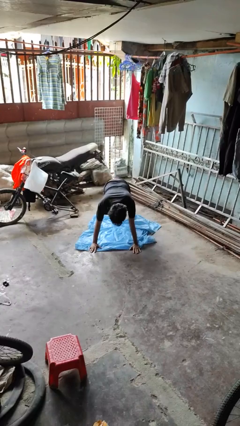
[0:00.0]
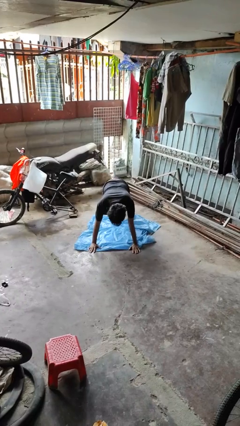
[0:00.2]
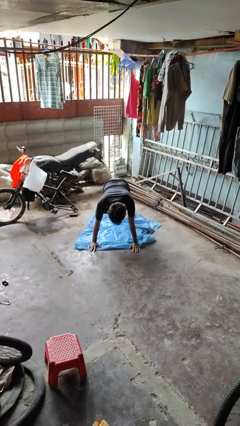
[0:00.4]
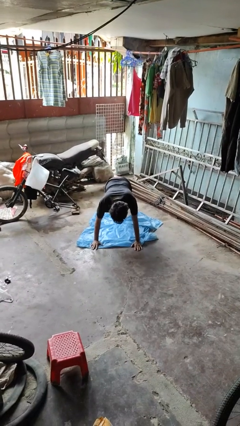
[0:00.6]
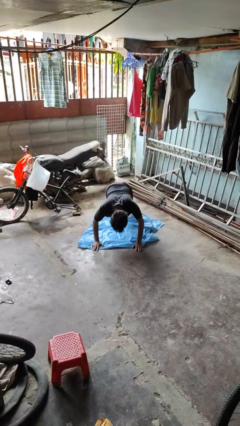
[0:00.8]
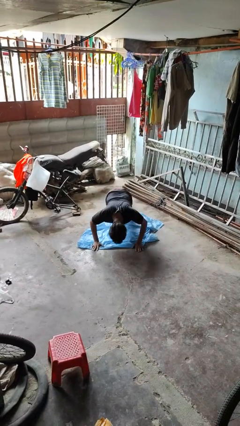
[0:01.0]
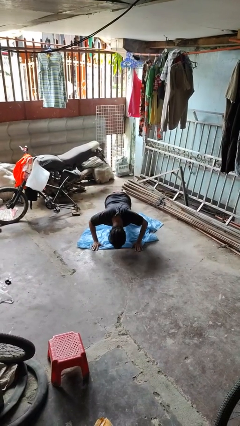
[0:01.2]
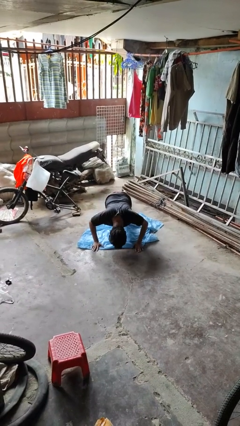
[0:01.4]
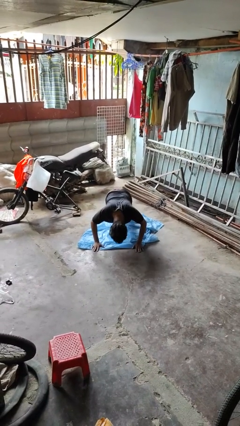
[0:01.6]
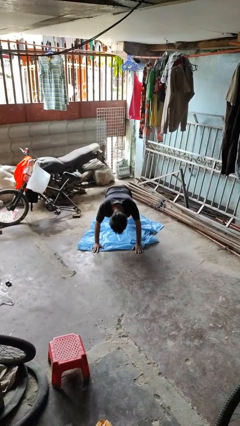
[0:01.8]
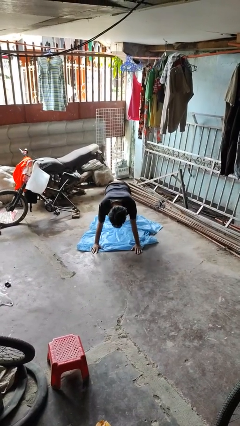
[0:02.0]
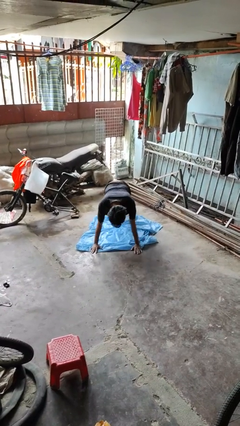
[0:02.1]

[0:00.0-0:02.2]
person exercises with pushup

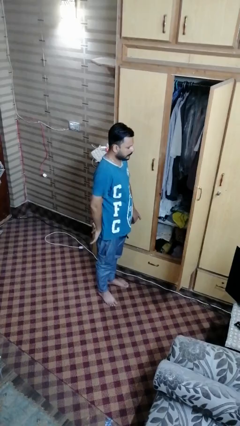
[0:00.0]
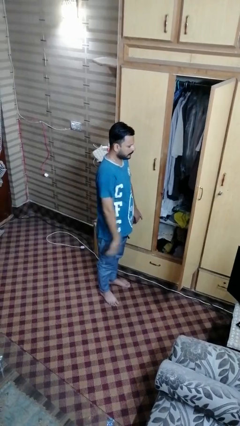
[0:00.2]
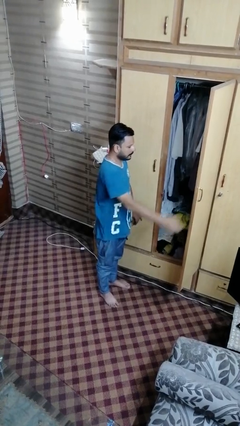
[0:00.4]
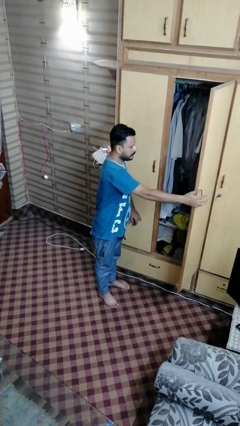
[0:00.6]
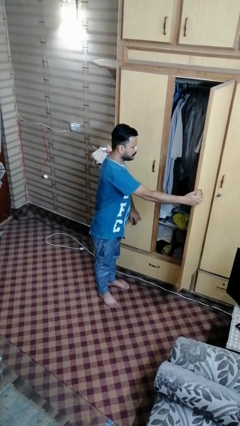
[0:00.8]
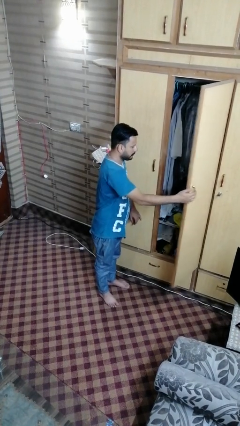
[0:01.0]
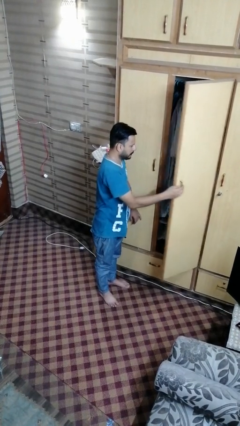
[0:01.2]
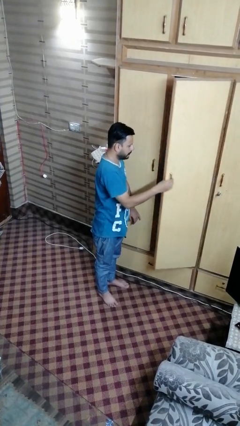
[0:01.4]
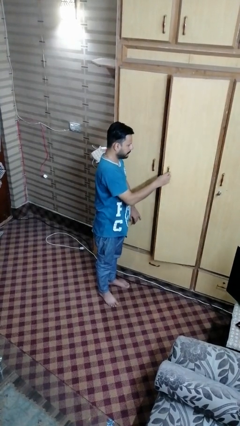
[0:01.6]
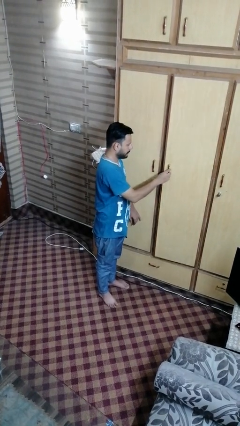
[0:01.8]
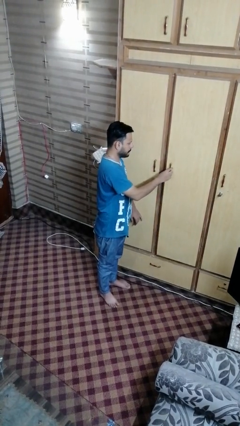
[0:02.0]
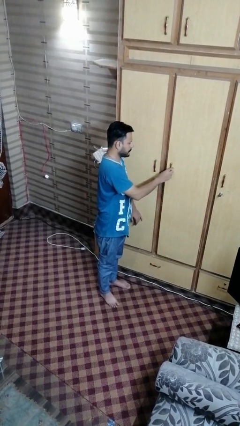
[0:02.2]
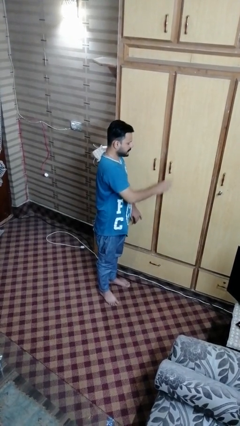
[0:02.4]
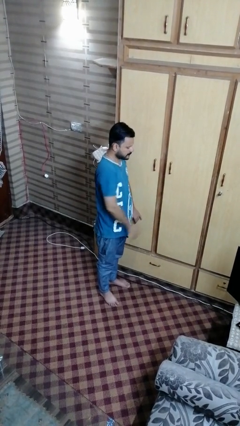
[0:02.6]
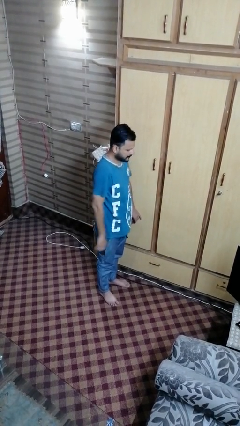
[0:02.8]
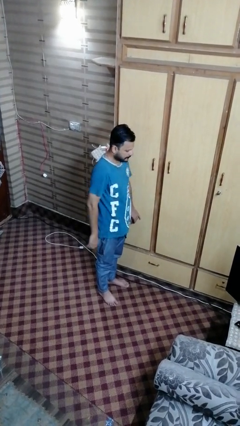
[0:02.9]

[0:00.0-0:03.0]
person closes closet door

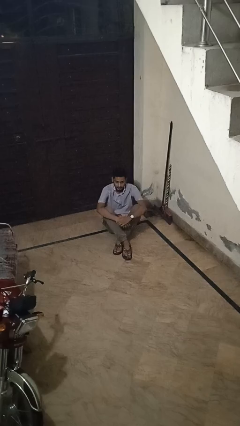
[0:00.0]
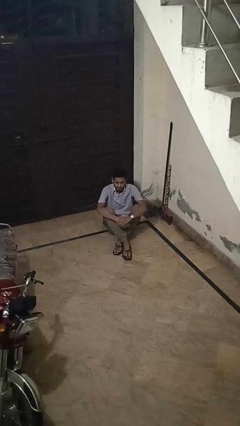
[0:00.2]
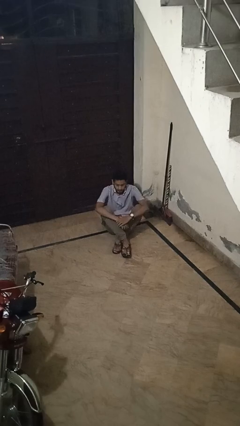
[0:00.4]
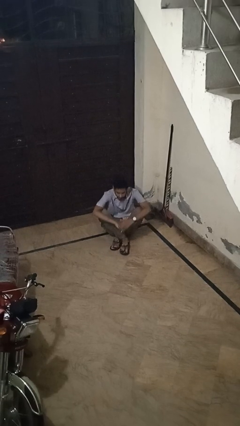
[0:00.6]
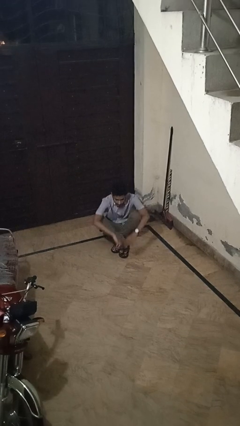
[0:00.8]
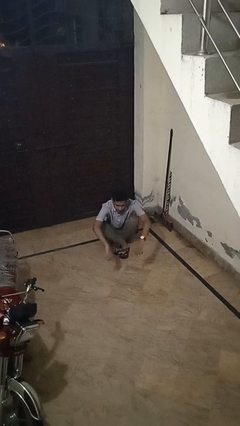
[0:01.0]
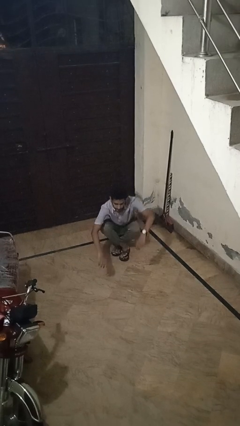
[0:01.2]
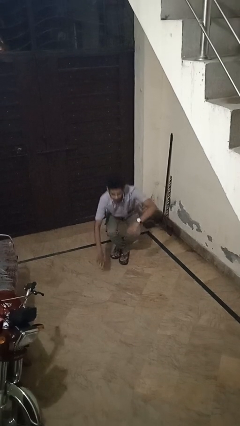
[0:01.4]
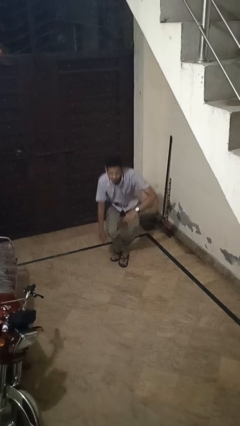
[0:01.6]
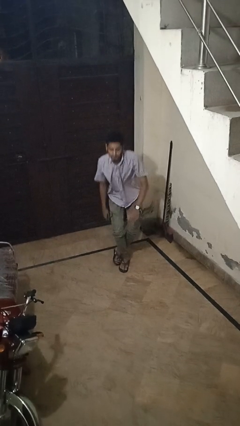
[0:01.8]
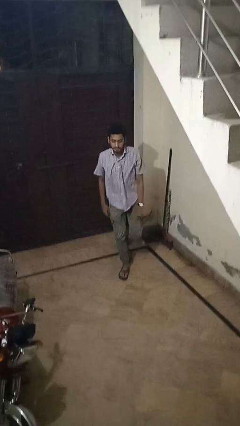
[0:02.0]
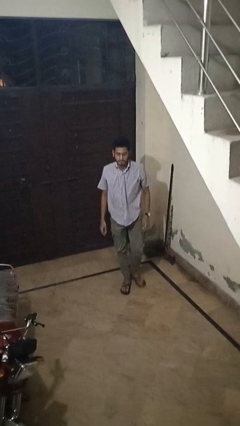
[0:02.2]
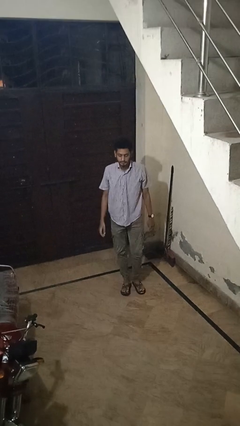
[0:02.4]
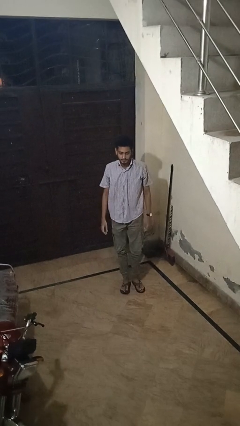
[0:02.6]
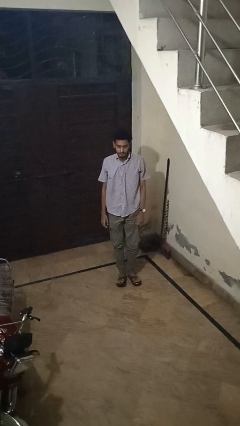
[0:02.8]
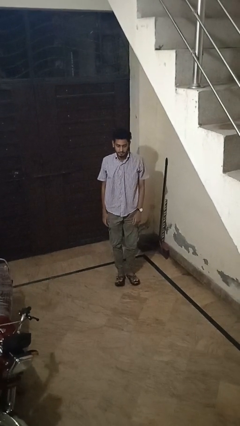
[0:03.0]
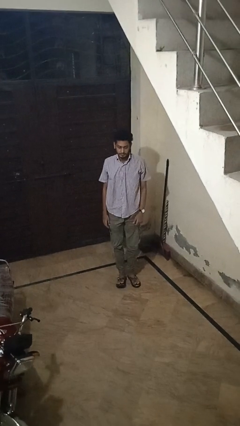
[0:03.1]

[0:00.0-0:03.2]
person stands up from floor

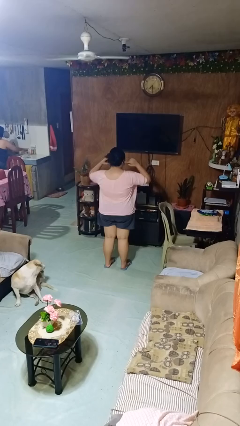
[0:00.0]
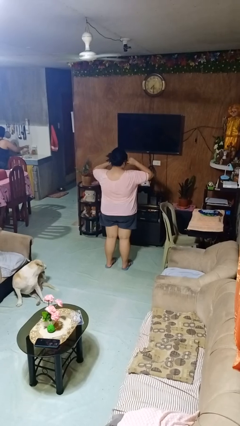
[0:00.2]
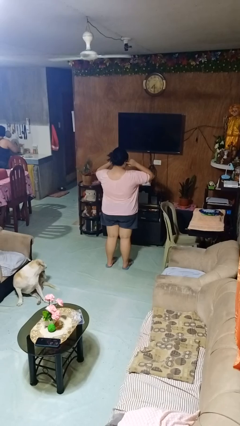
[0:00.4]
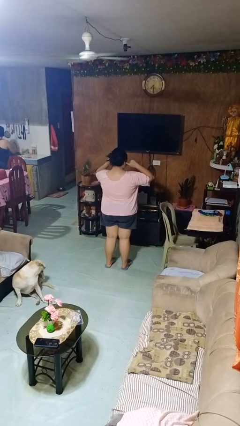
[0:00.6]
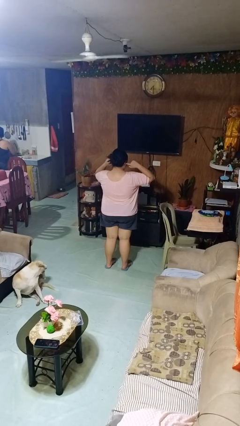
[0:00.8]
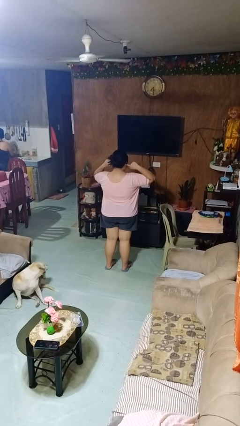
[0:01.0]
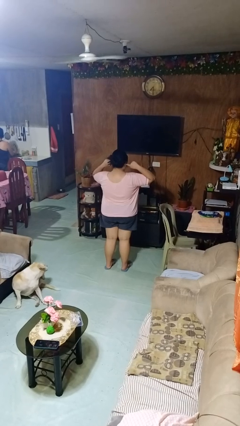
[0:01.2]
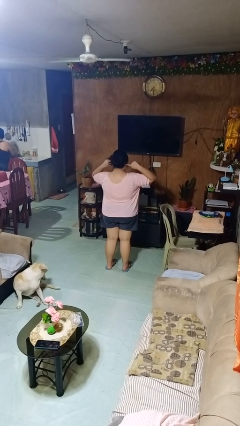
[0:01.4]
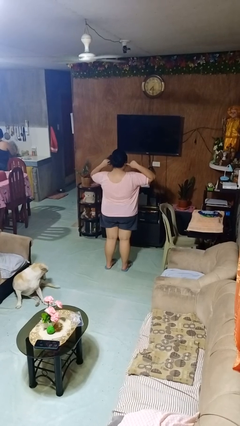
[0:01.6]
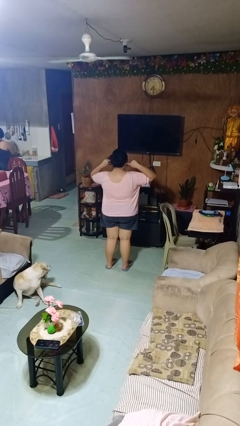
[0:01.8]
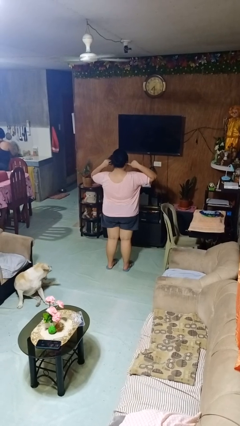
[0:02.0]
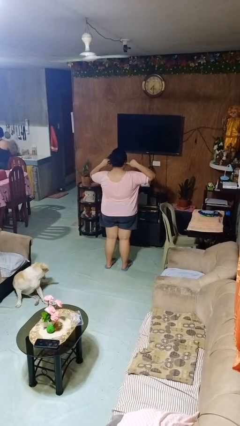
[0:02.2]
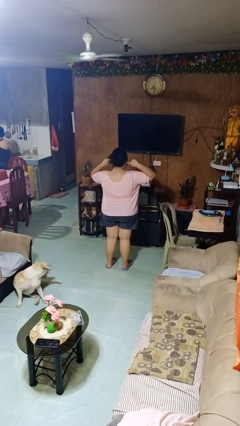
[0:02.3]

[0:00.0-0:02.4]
person puts fingers in ear

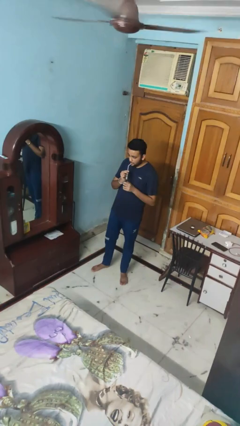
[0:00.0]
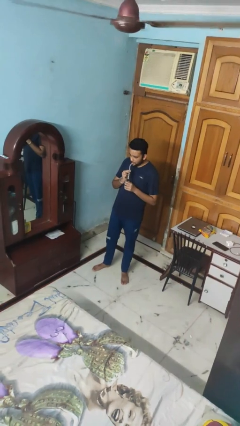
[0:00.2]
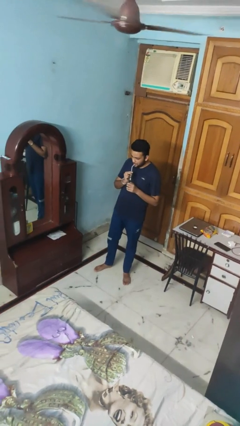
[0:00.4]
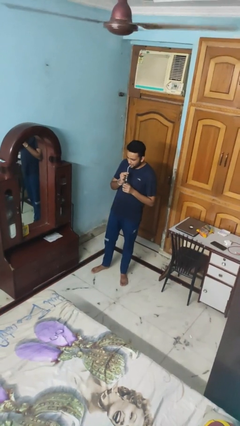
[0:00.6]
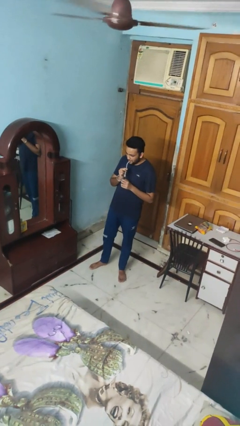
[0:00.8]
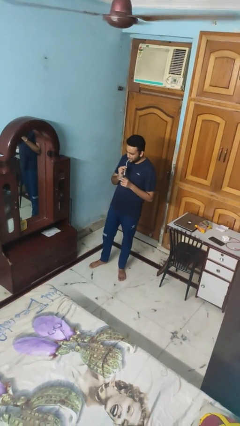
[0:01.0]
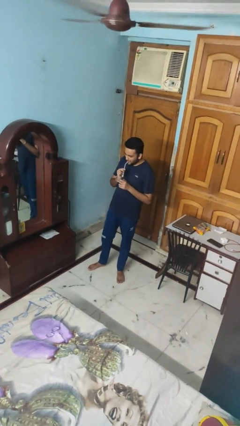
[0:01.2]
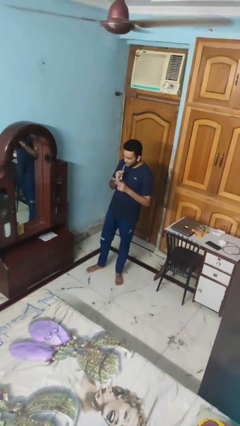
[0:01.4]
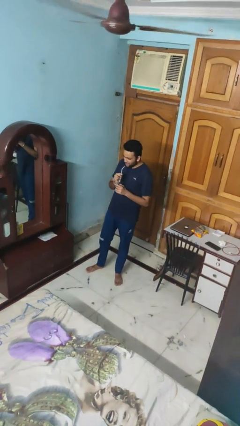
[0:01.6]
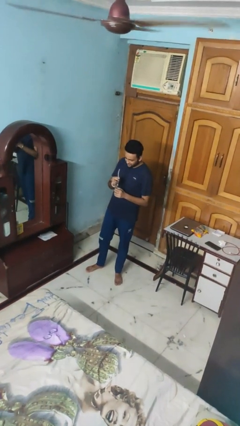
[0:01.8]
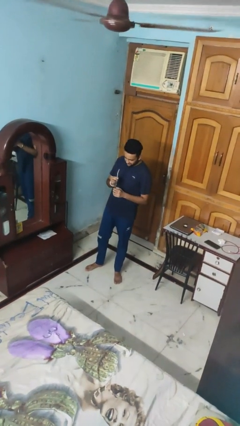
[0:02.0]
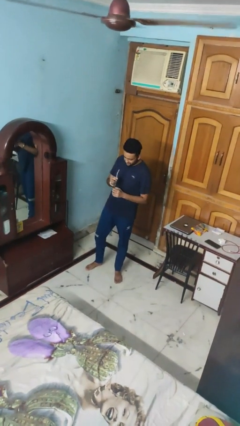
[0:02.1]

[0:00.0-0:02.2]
person drinks from straw

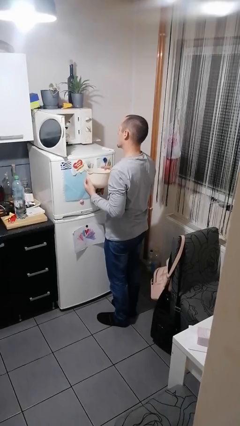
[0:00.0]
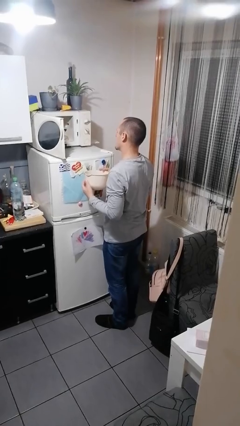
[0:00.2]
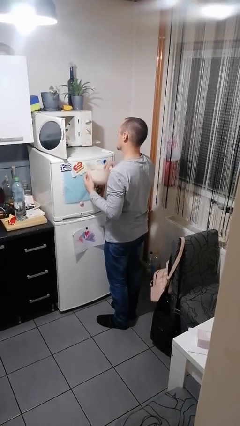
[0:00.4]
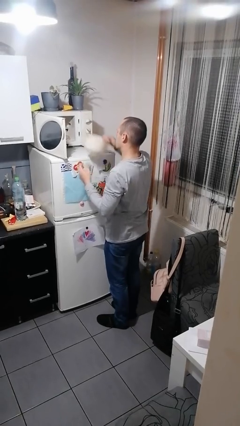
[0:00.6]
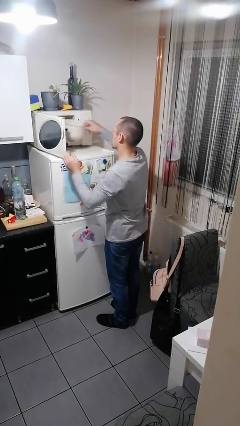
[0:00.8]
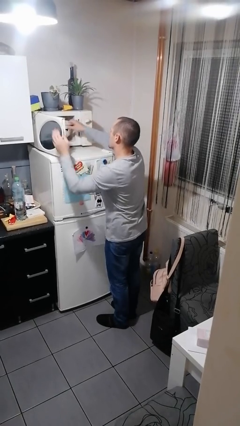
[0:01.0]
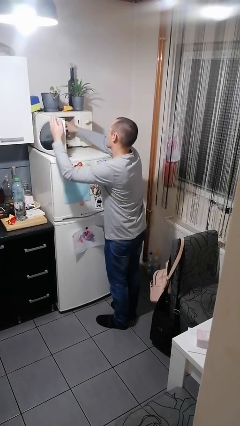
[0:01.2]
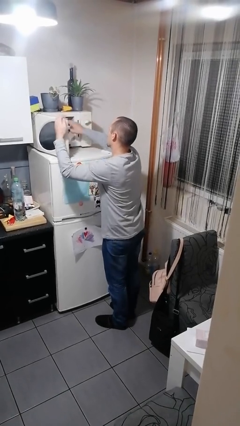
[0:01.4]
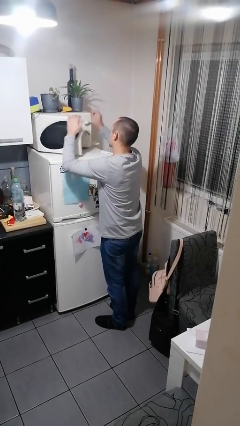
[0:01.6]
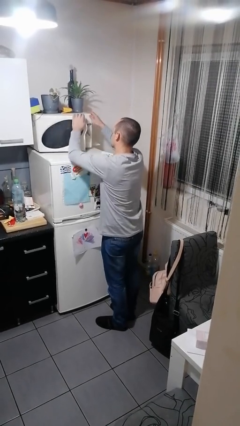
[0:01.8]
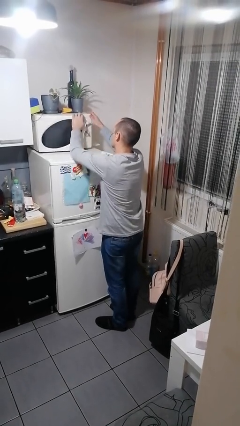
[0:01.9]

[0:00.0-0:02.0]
person puts object into microwave

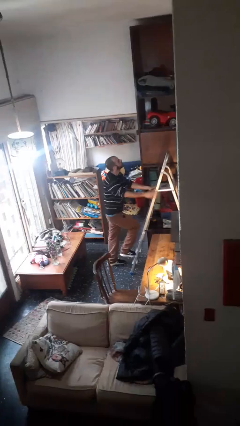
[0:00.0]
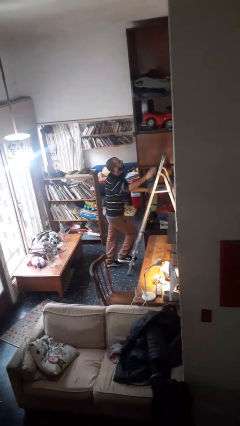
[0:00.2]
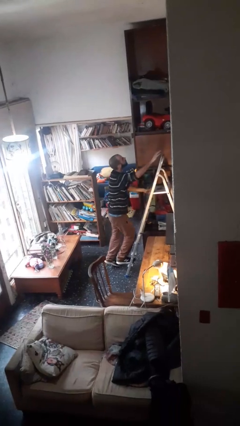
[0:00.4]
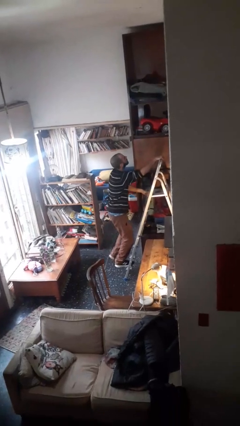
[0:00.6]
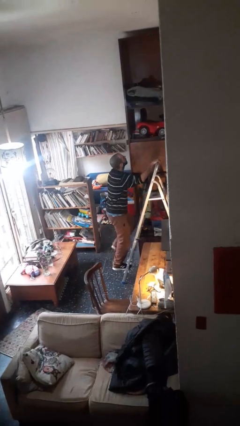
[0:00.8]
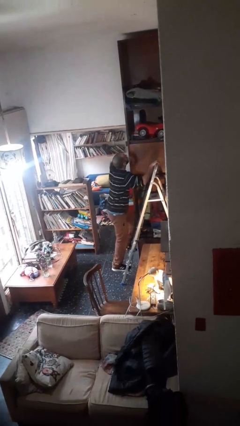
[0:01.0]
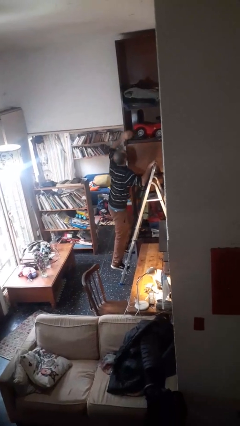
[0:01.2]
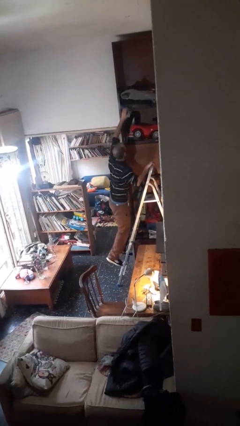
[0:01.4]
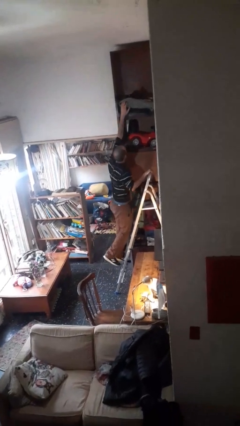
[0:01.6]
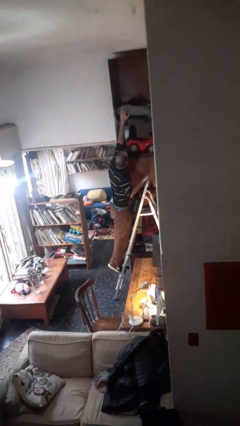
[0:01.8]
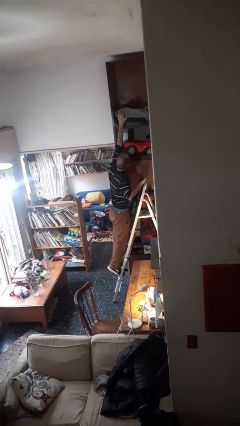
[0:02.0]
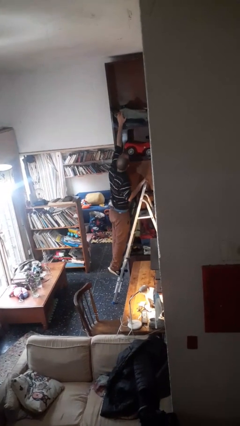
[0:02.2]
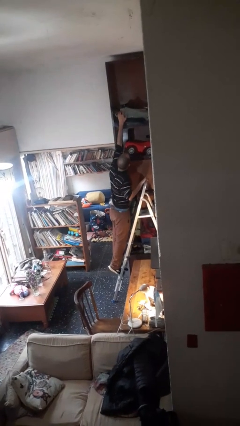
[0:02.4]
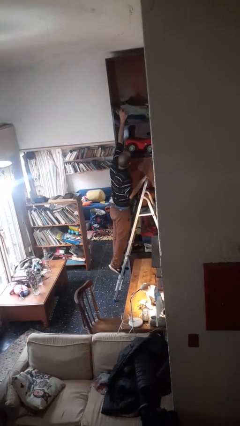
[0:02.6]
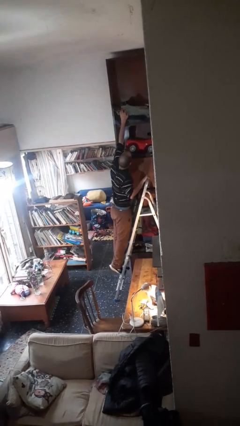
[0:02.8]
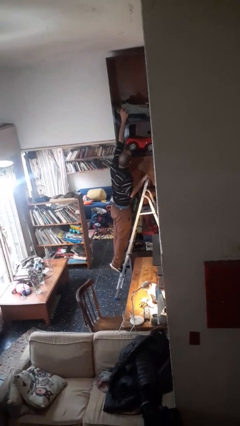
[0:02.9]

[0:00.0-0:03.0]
person climbs up ladder
